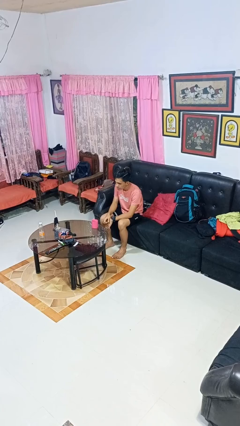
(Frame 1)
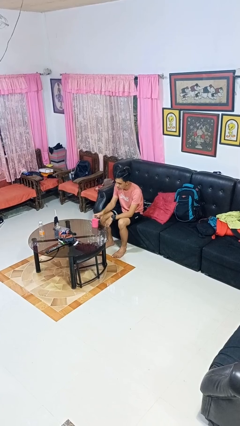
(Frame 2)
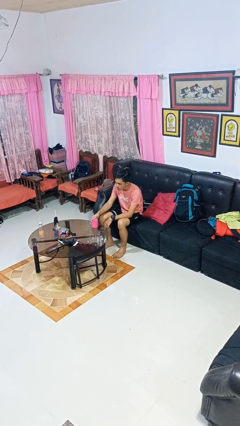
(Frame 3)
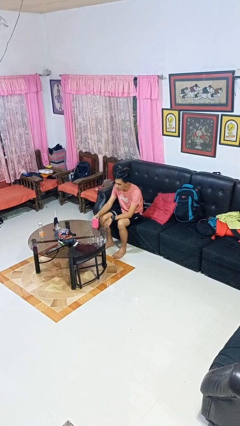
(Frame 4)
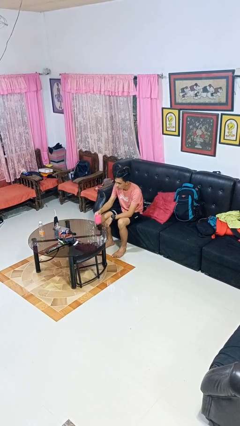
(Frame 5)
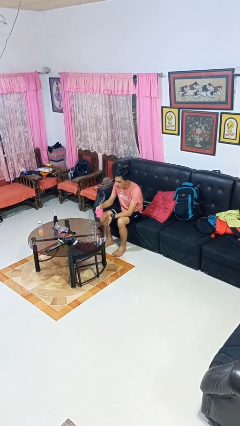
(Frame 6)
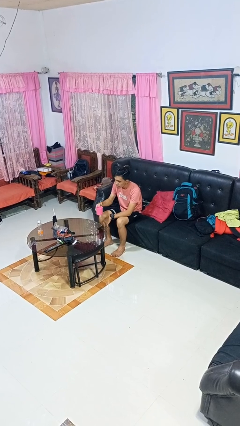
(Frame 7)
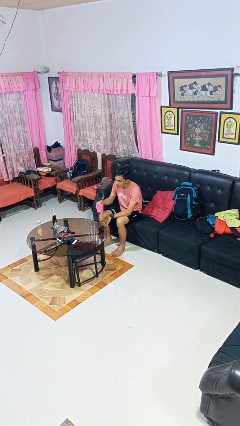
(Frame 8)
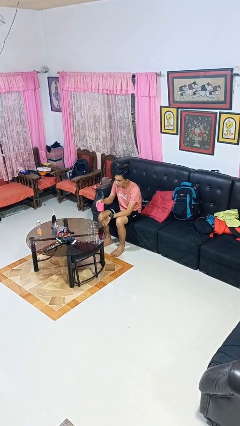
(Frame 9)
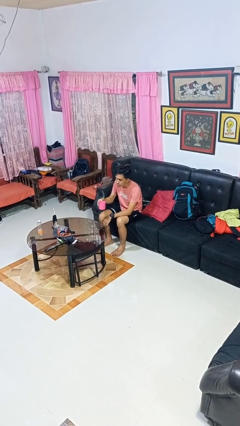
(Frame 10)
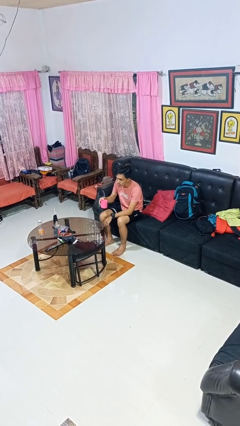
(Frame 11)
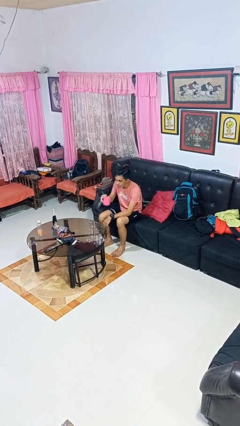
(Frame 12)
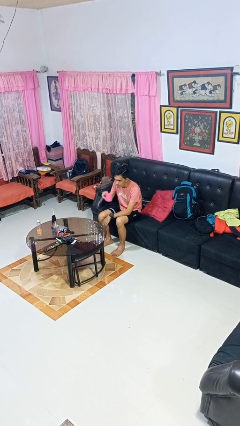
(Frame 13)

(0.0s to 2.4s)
person picks up object from table

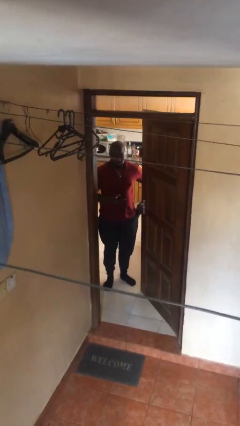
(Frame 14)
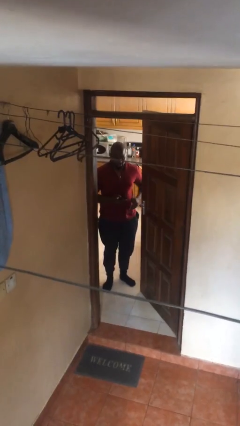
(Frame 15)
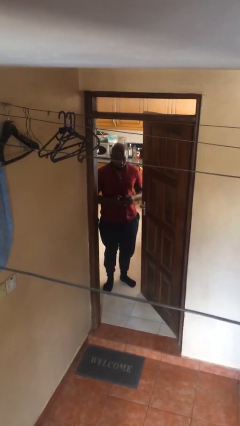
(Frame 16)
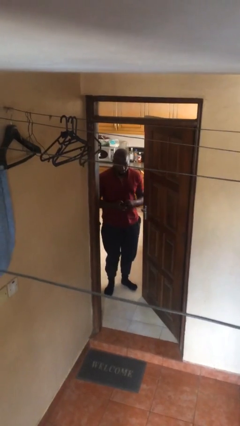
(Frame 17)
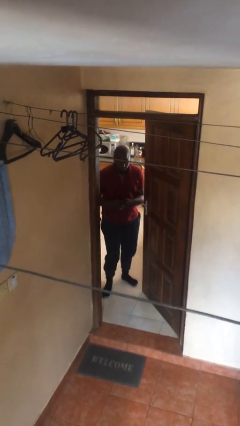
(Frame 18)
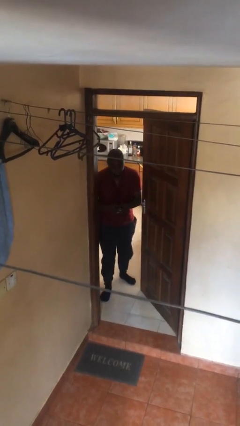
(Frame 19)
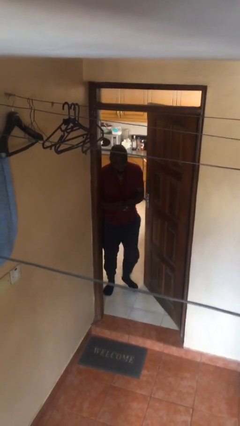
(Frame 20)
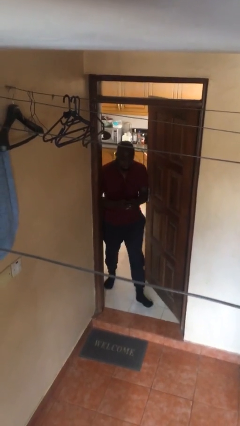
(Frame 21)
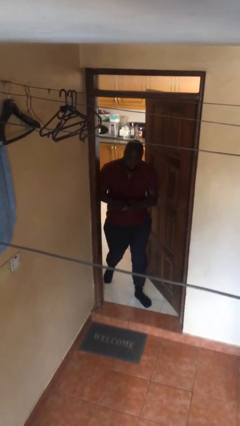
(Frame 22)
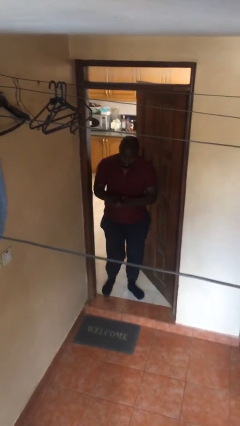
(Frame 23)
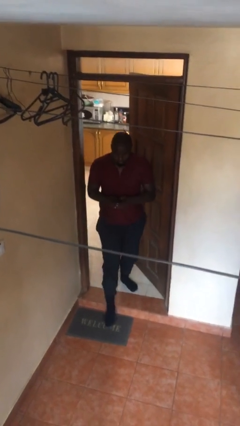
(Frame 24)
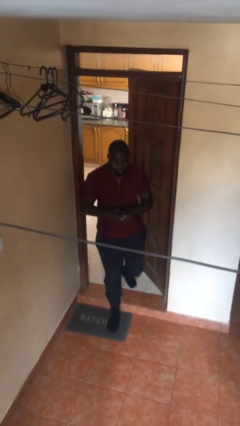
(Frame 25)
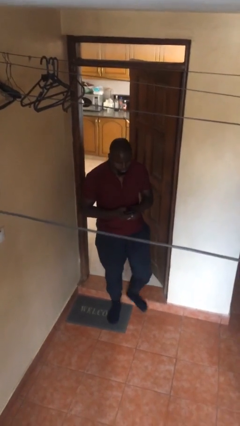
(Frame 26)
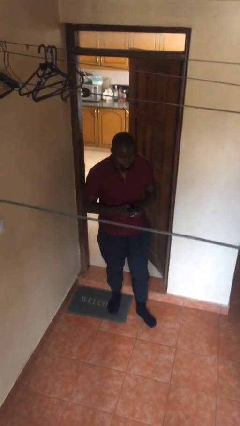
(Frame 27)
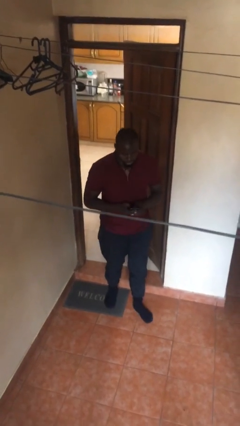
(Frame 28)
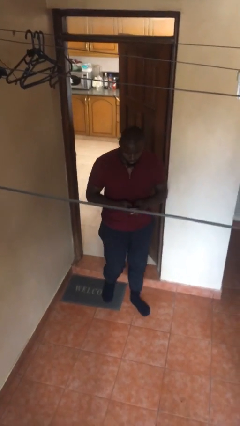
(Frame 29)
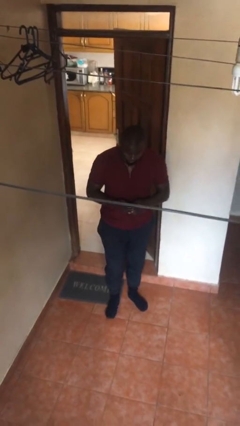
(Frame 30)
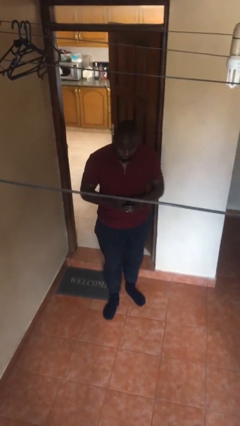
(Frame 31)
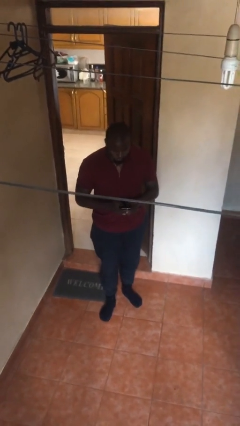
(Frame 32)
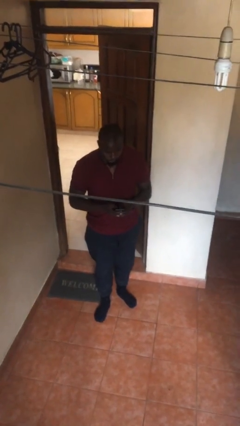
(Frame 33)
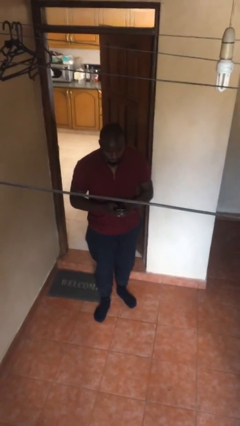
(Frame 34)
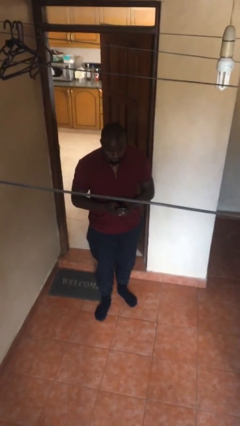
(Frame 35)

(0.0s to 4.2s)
person enters scene through structure

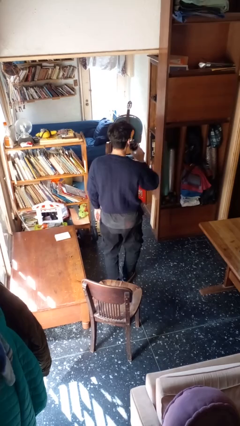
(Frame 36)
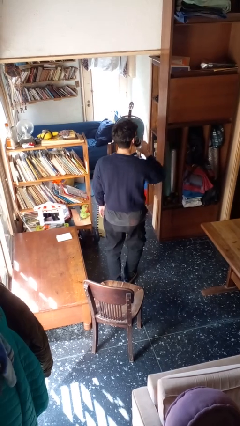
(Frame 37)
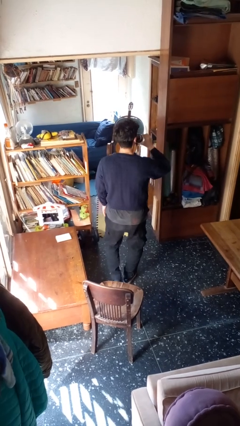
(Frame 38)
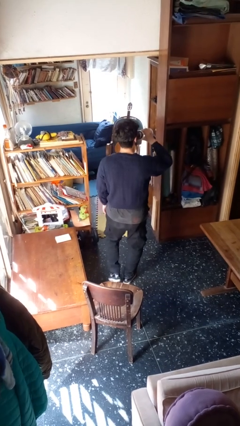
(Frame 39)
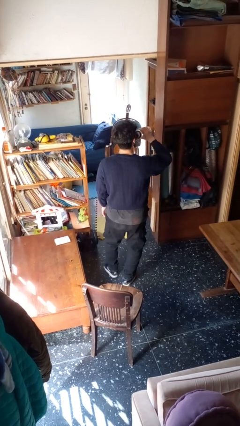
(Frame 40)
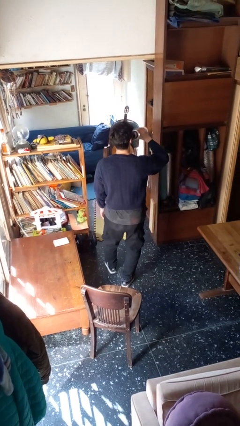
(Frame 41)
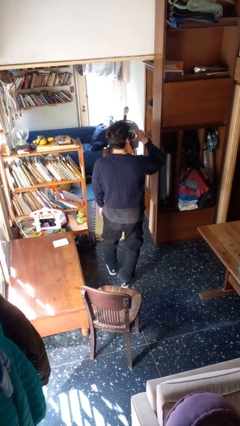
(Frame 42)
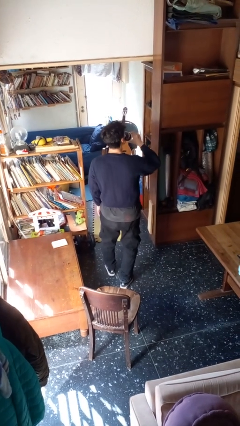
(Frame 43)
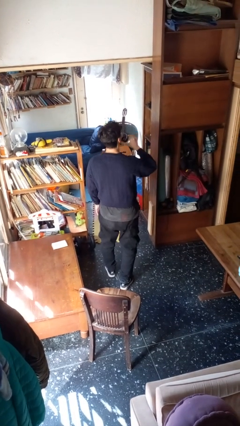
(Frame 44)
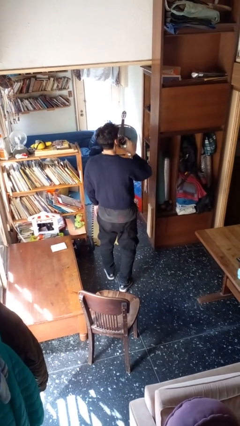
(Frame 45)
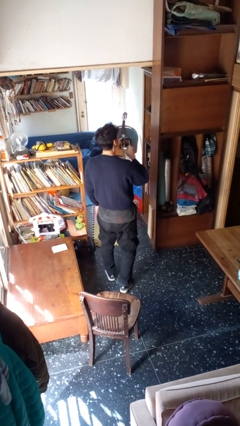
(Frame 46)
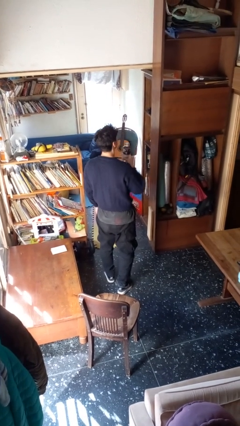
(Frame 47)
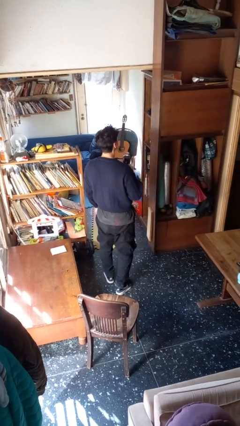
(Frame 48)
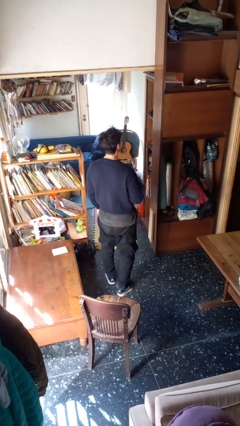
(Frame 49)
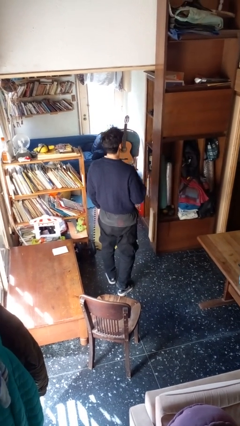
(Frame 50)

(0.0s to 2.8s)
person drinks from bottle

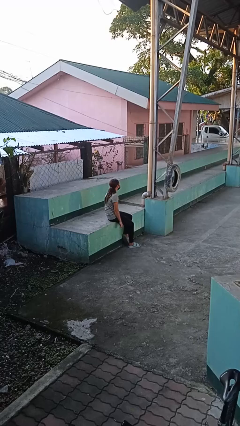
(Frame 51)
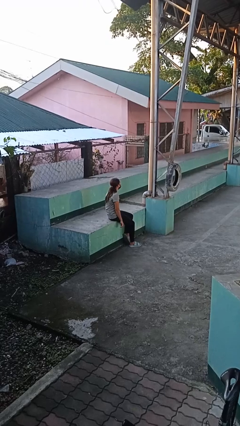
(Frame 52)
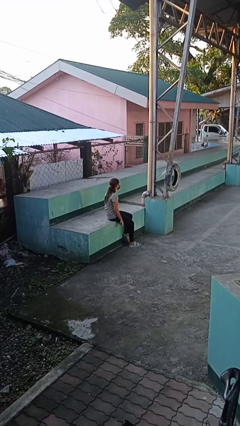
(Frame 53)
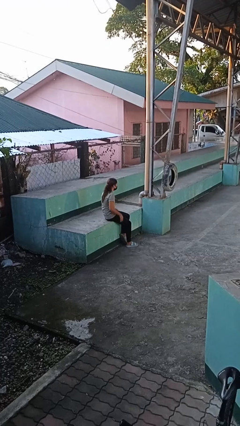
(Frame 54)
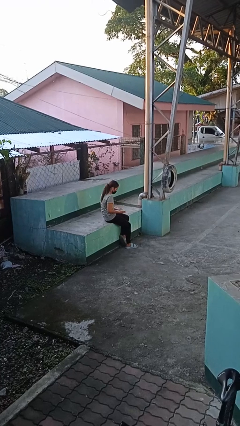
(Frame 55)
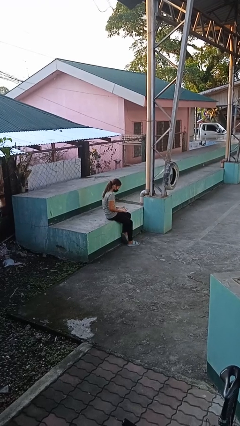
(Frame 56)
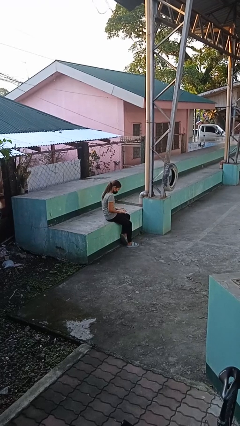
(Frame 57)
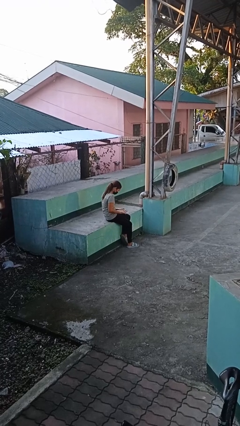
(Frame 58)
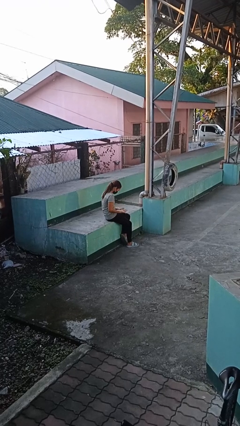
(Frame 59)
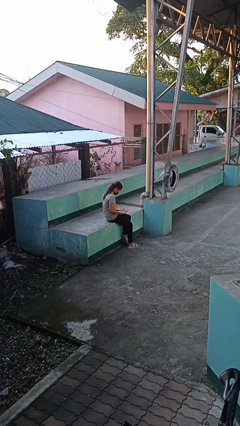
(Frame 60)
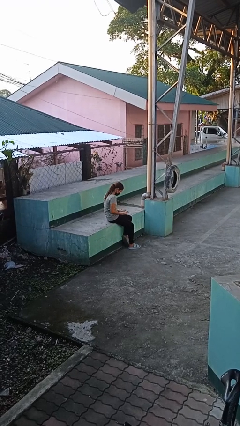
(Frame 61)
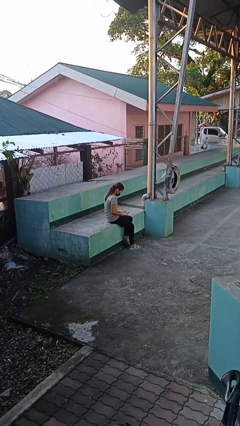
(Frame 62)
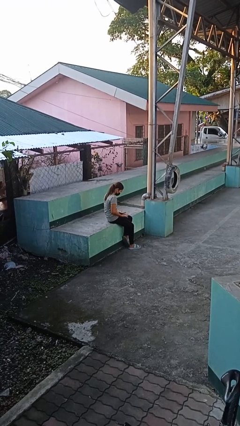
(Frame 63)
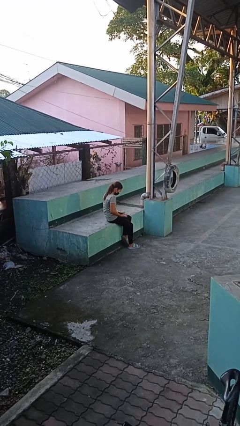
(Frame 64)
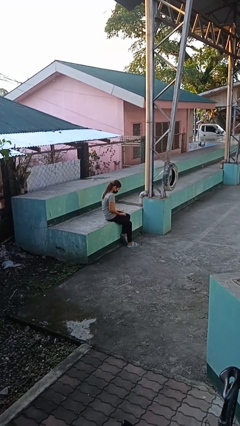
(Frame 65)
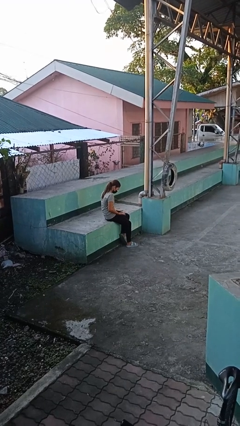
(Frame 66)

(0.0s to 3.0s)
person looks at hands in lap

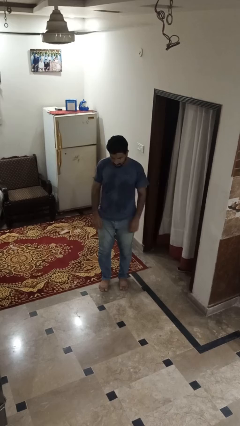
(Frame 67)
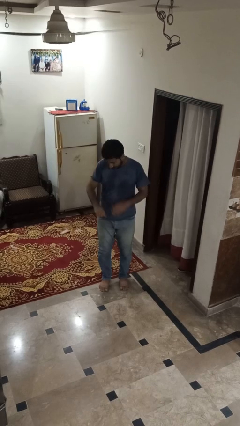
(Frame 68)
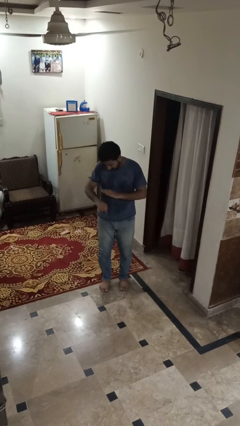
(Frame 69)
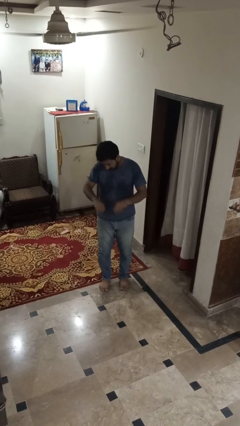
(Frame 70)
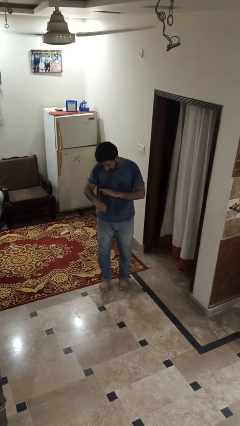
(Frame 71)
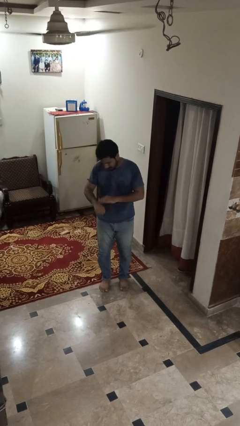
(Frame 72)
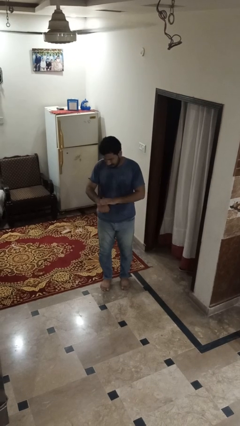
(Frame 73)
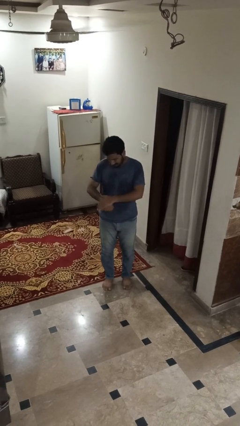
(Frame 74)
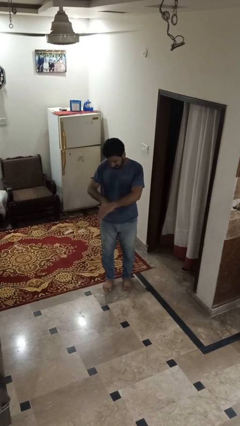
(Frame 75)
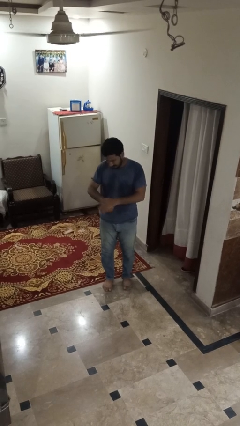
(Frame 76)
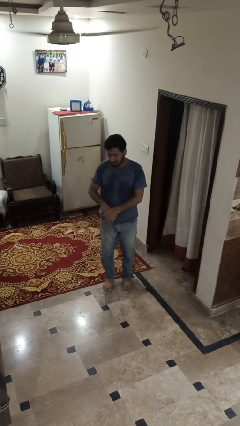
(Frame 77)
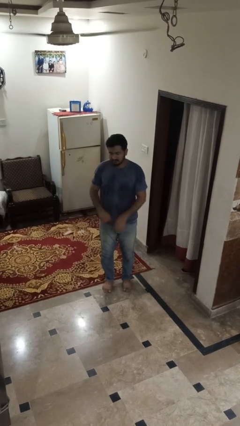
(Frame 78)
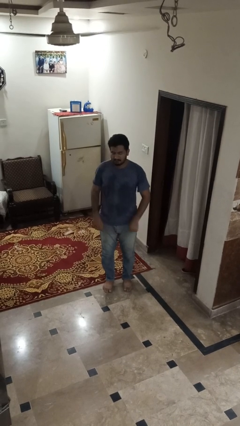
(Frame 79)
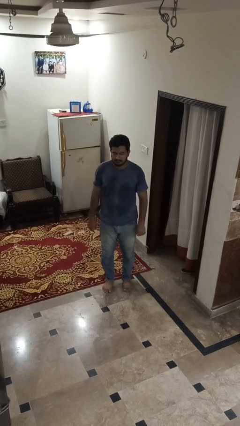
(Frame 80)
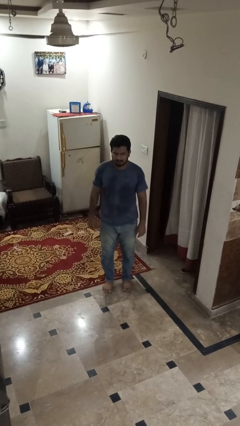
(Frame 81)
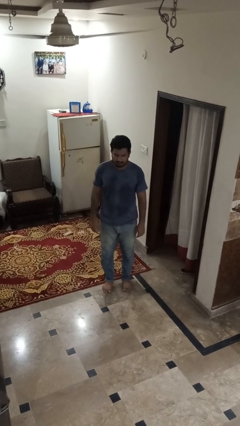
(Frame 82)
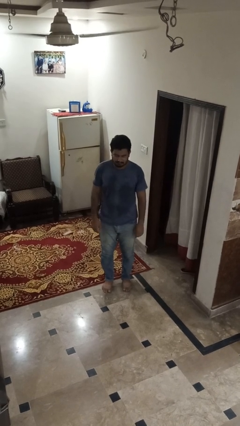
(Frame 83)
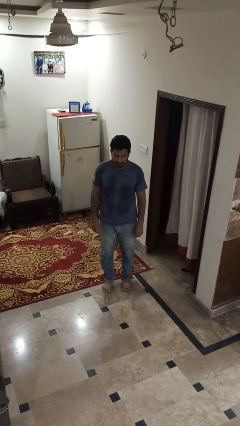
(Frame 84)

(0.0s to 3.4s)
person swats bug

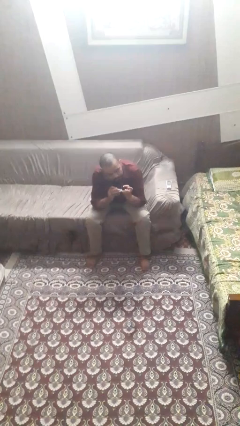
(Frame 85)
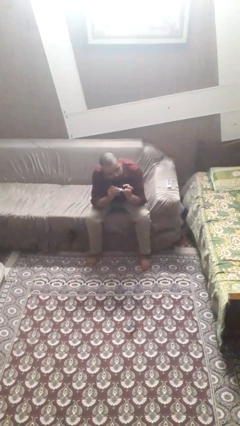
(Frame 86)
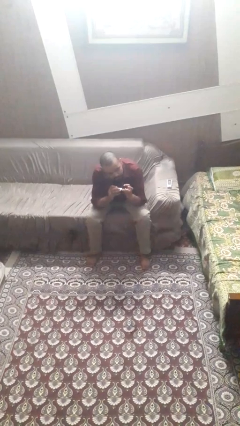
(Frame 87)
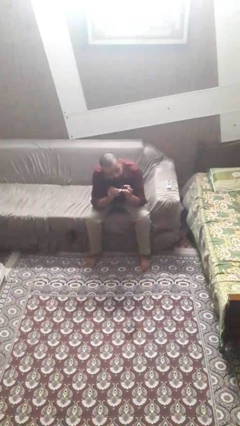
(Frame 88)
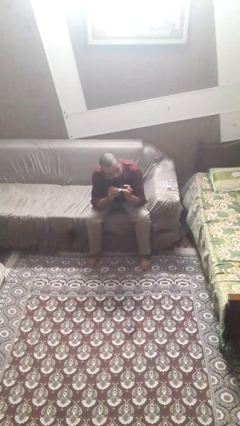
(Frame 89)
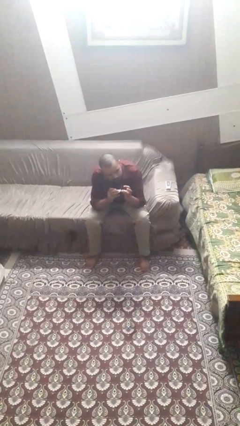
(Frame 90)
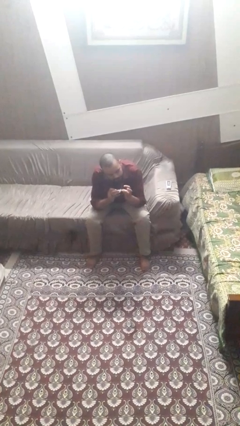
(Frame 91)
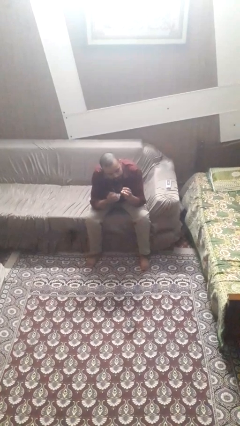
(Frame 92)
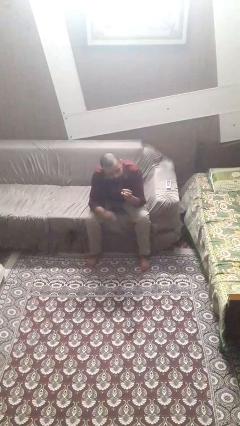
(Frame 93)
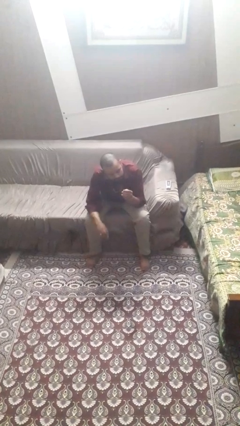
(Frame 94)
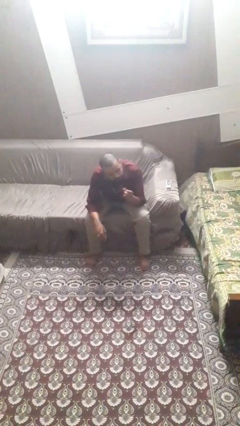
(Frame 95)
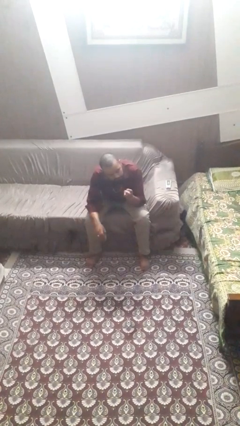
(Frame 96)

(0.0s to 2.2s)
person clips fingernails
